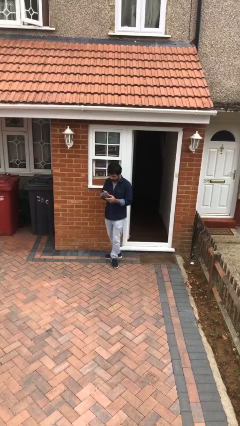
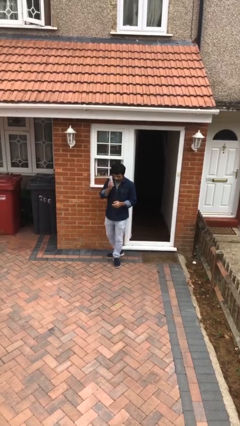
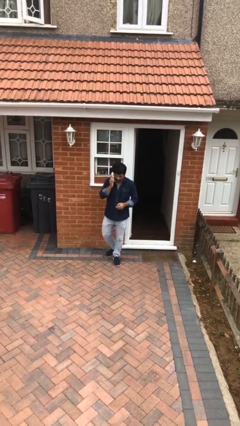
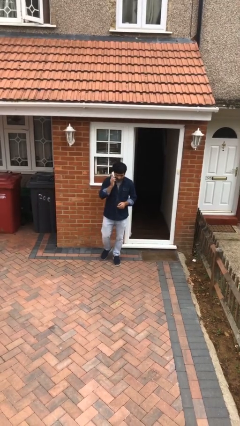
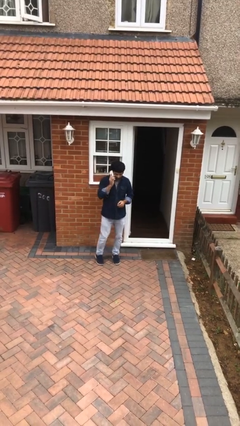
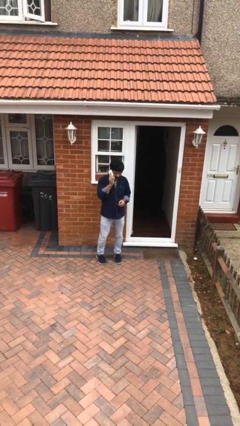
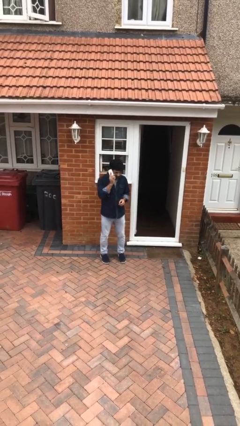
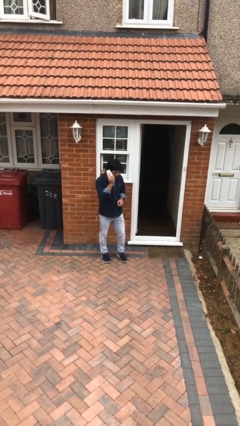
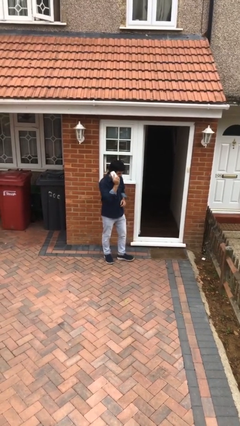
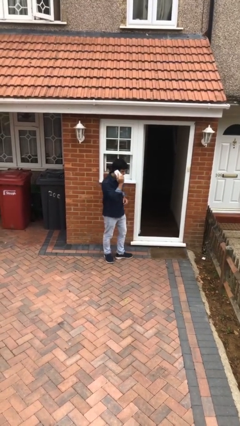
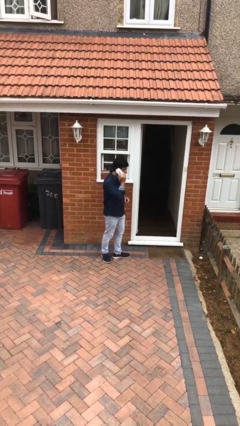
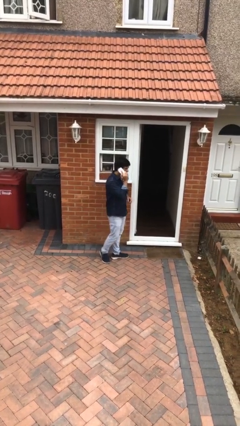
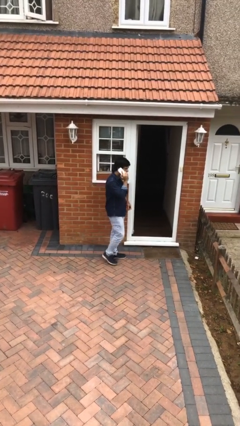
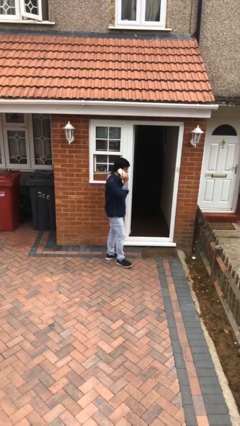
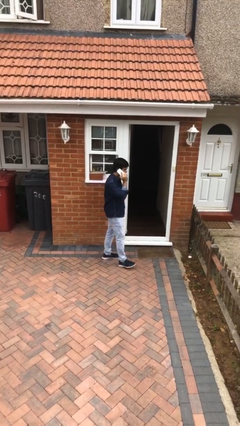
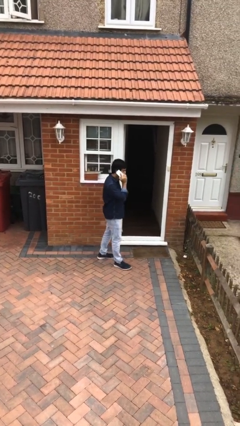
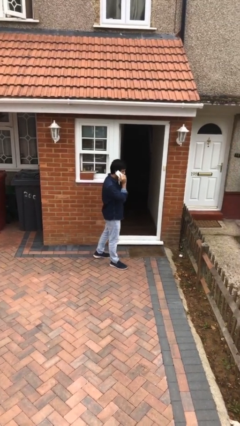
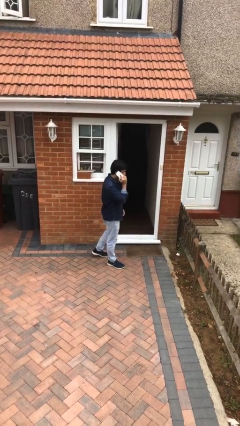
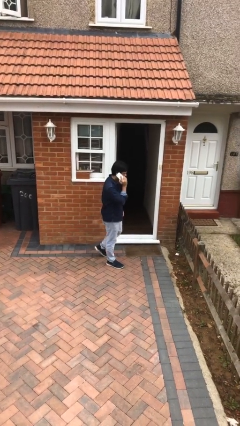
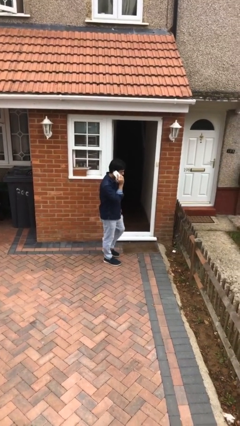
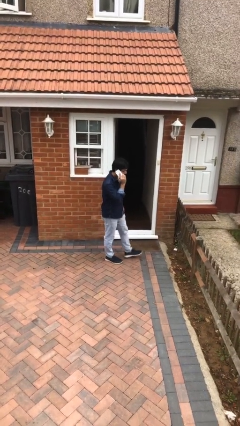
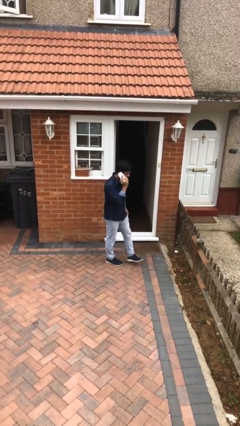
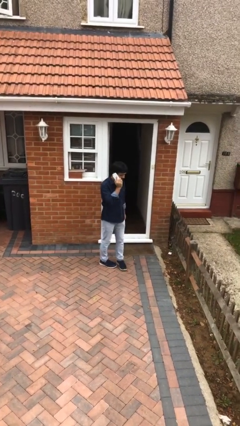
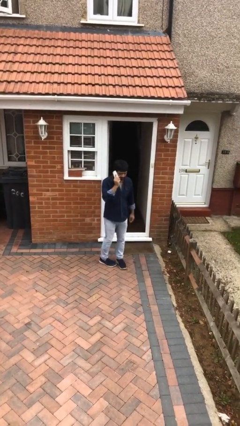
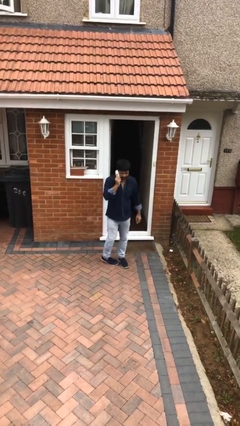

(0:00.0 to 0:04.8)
person talks on phone

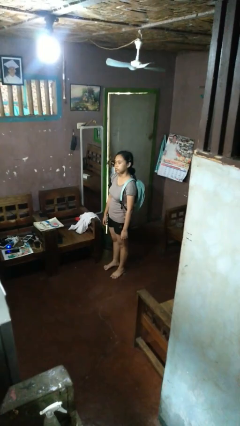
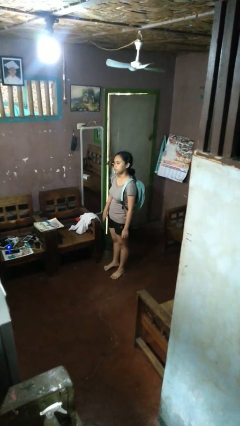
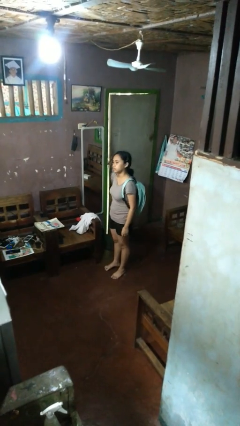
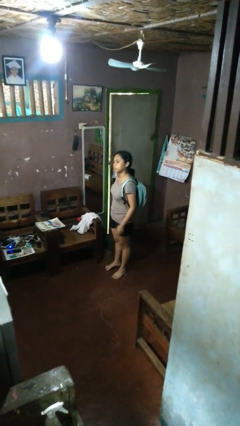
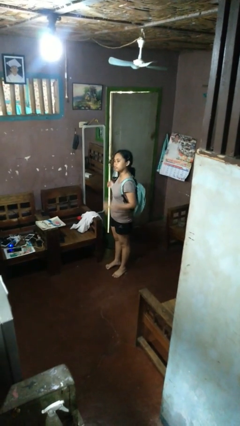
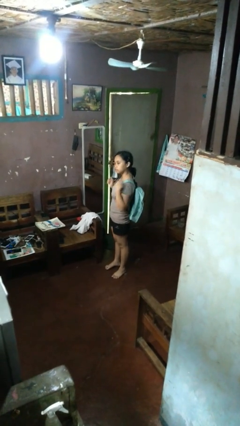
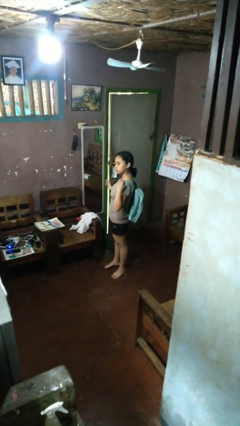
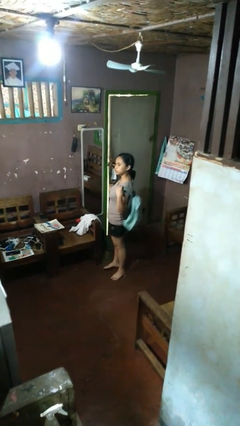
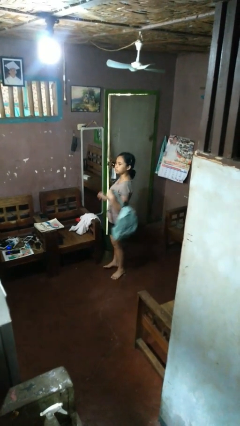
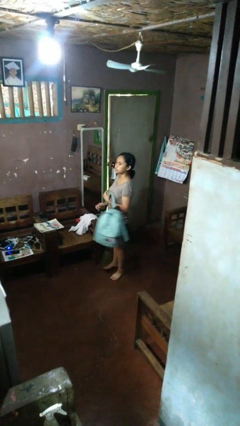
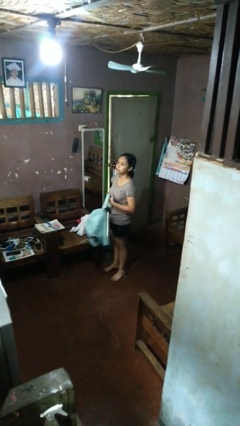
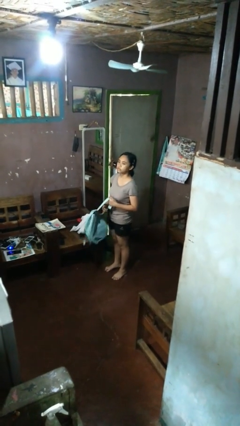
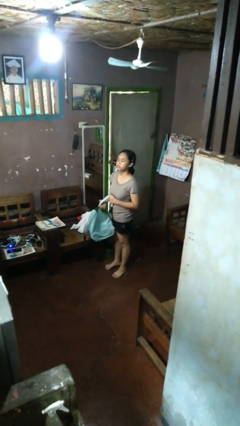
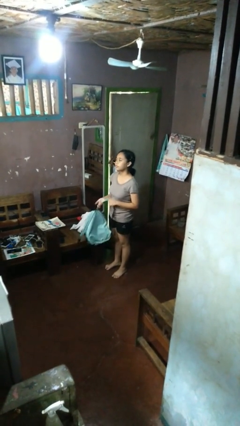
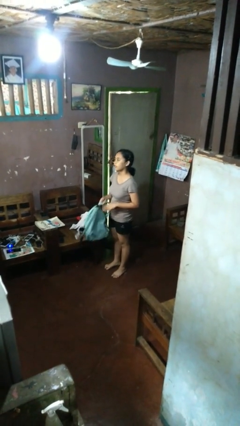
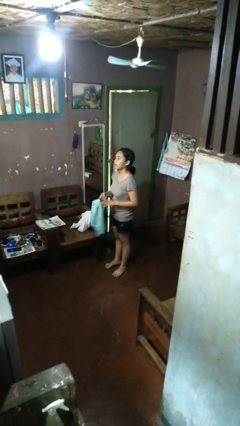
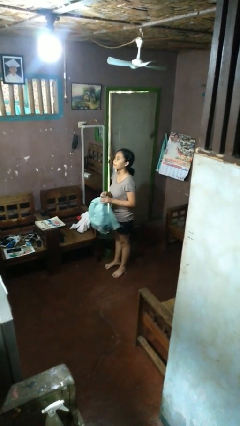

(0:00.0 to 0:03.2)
person takes off backpack

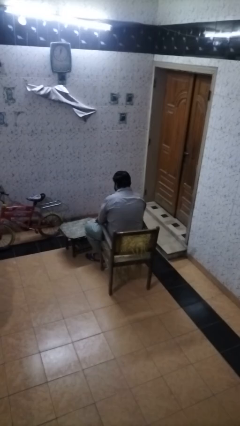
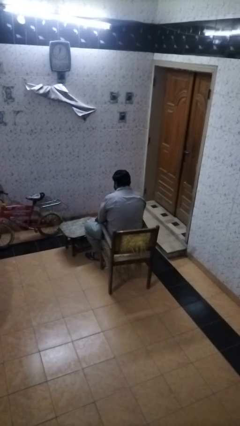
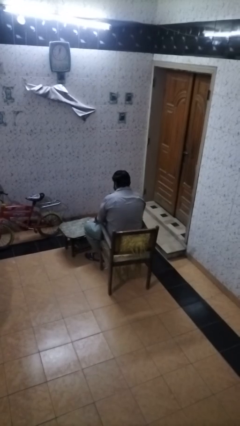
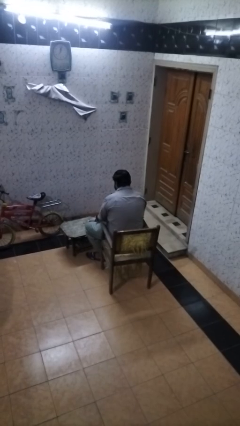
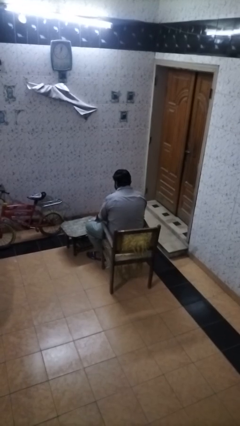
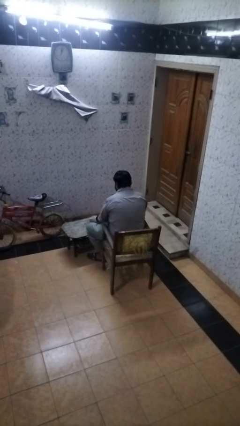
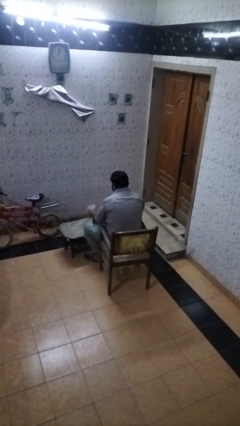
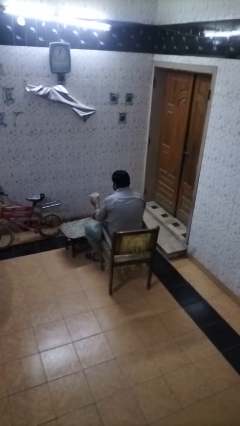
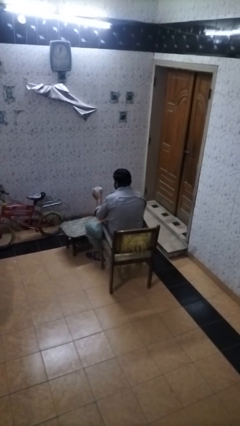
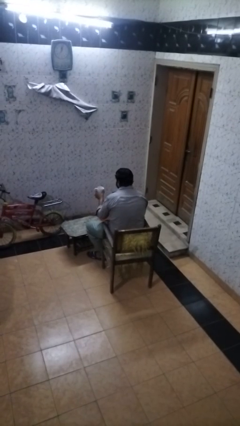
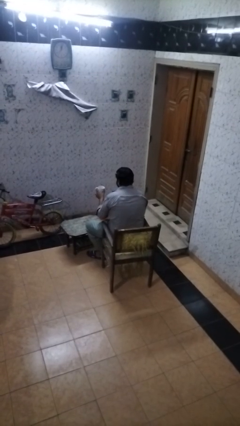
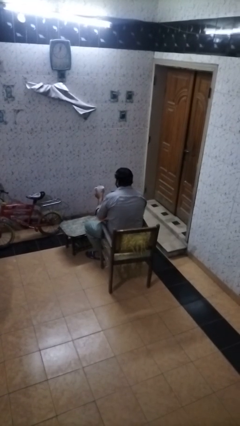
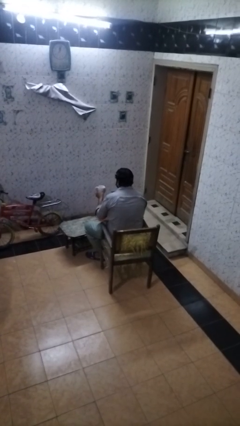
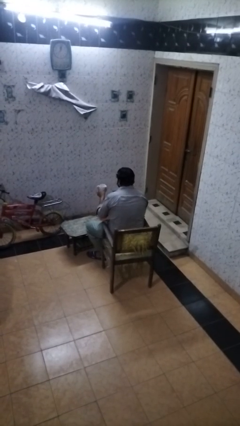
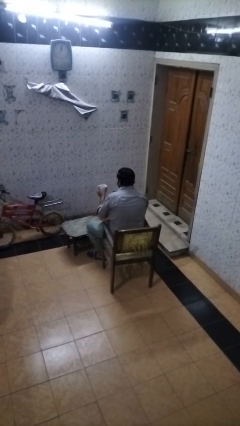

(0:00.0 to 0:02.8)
person picks up object from table

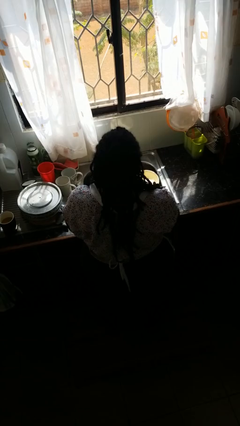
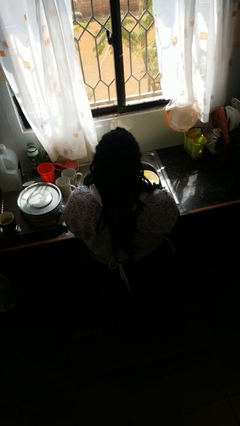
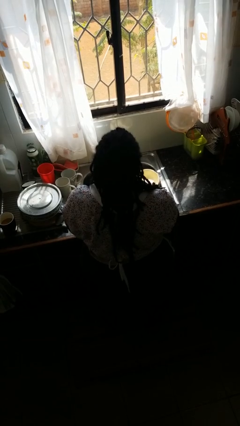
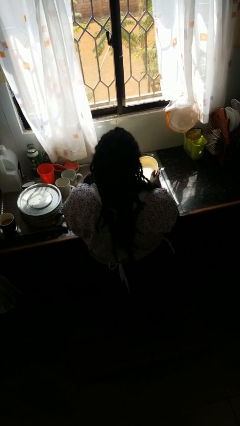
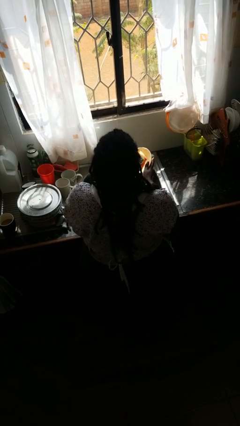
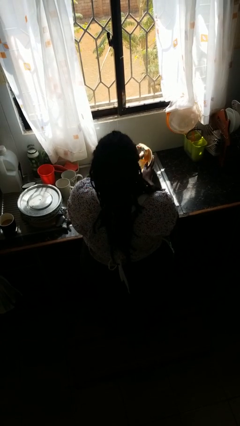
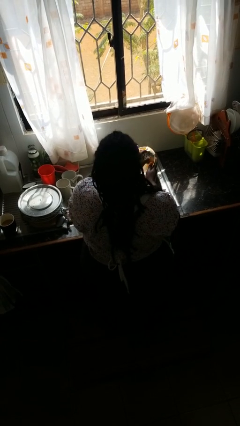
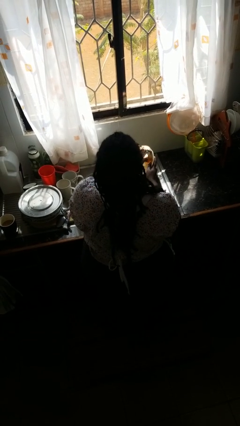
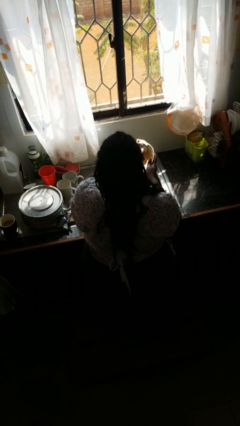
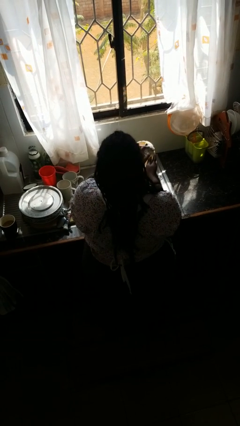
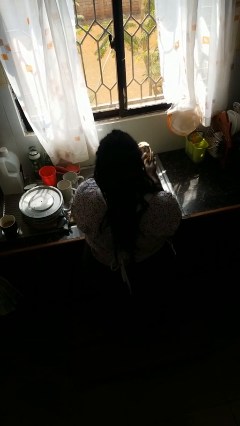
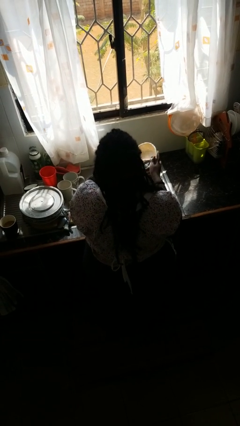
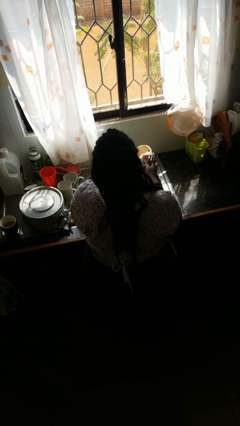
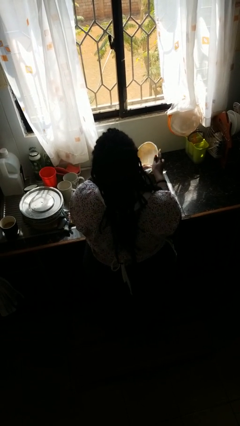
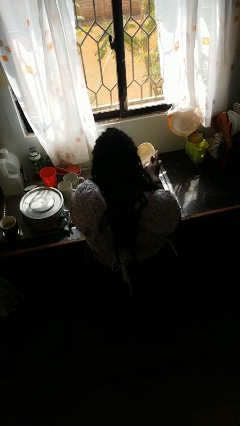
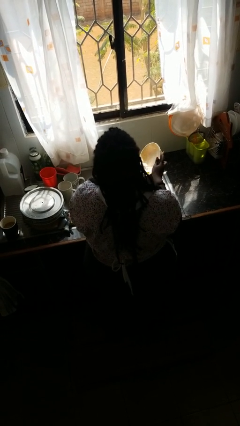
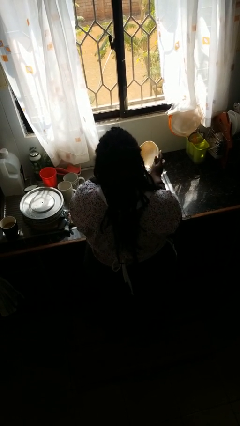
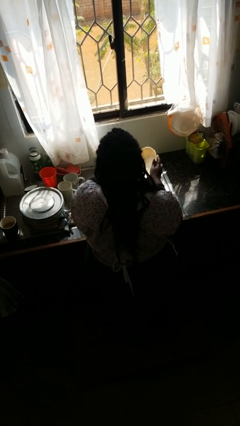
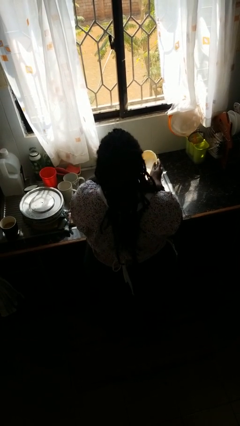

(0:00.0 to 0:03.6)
person washes dish

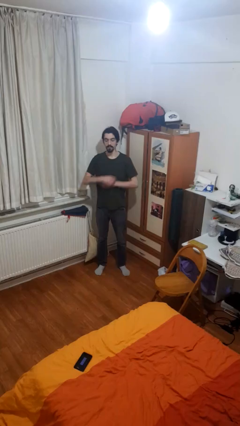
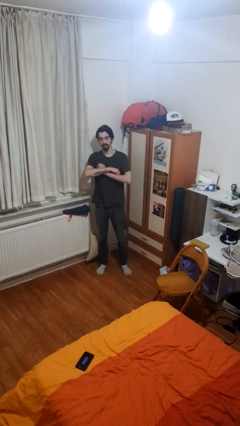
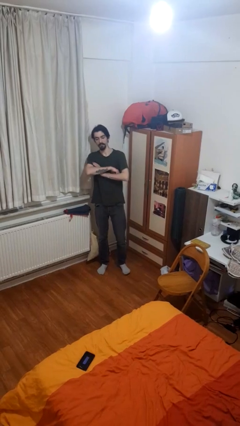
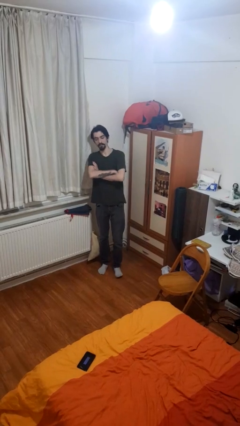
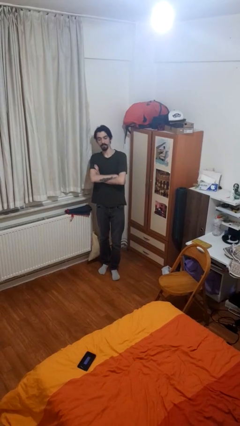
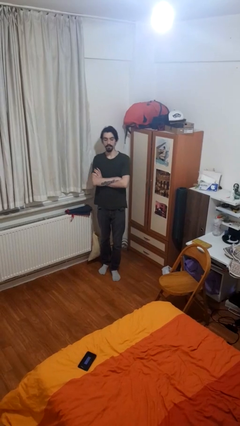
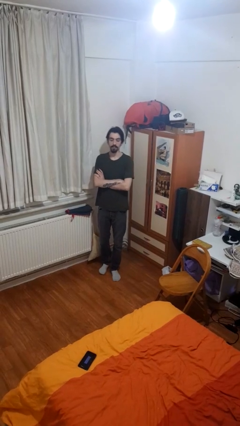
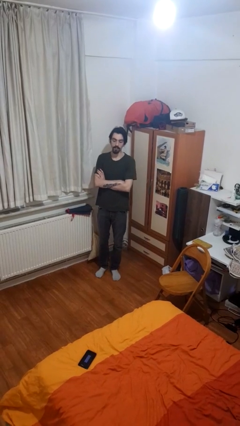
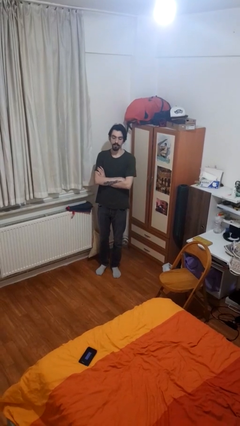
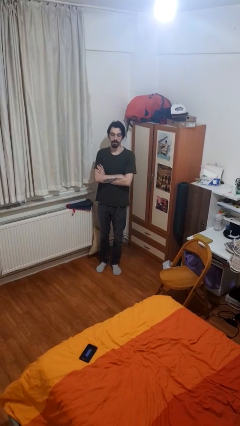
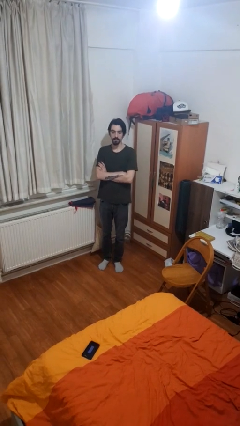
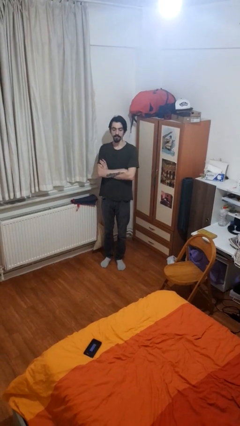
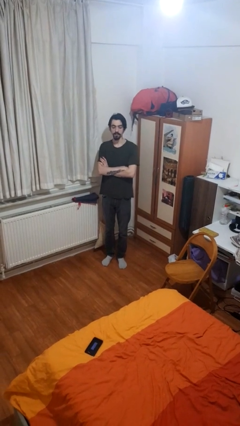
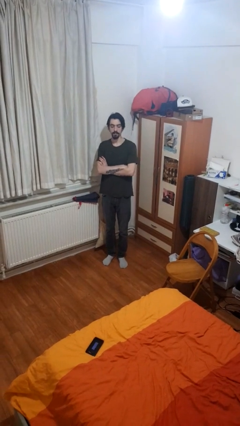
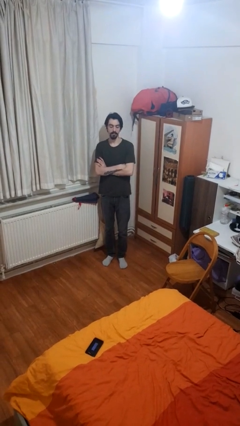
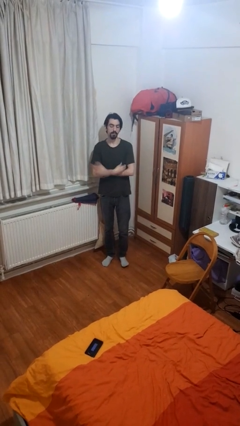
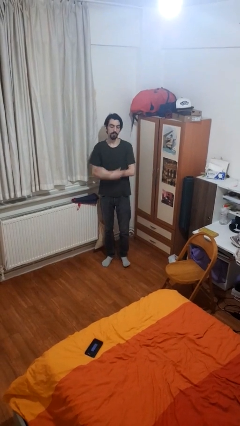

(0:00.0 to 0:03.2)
person crosses arms

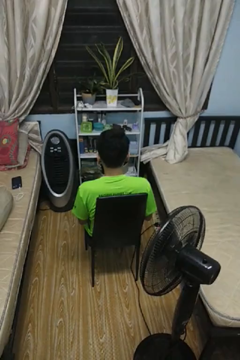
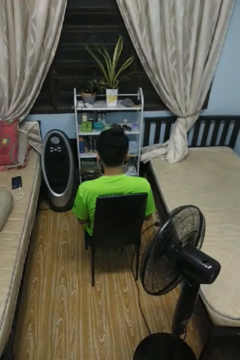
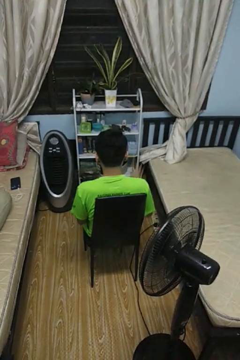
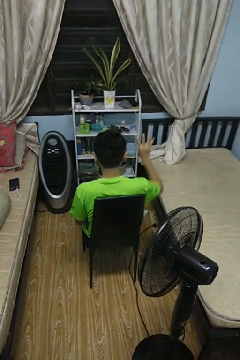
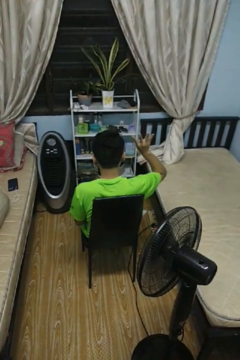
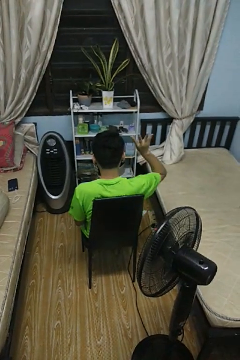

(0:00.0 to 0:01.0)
person gestures number four
